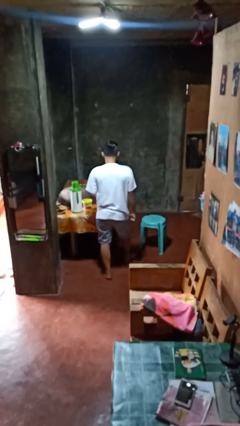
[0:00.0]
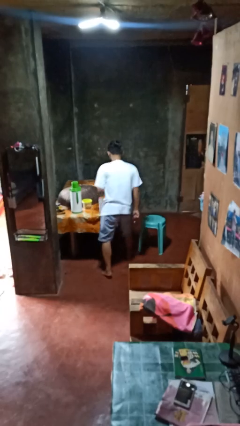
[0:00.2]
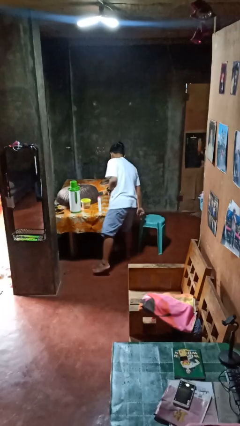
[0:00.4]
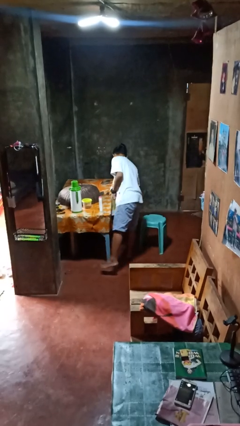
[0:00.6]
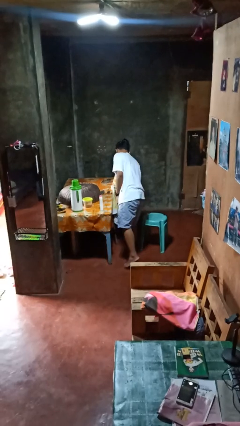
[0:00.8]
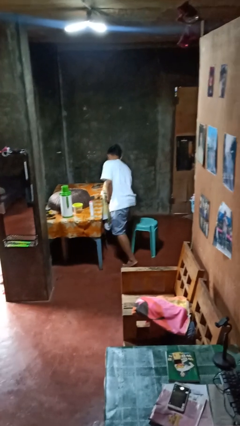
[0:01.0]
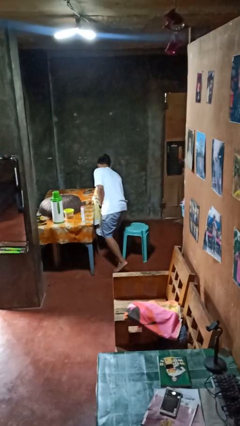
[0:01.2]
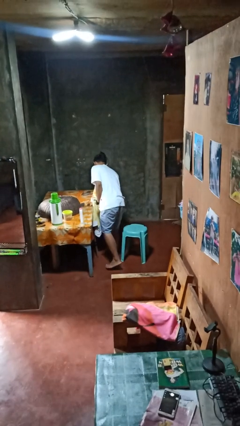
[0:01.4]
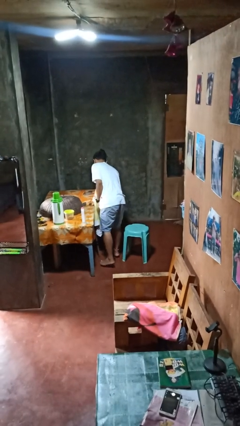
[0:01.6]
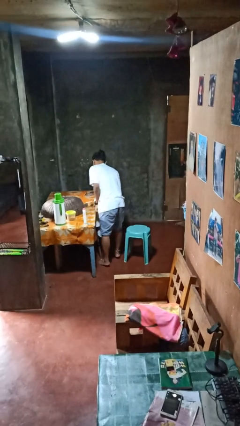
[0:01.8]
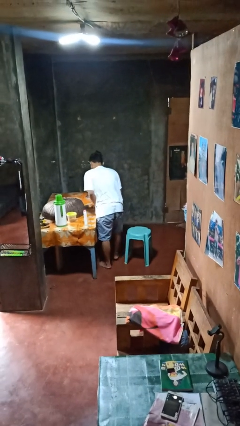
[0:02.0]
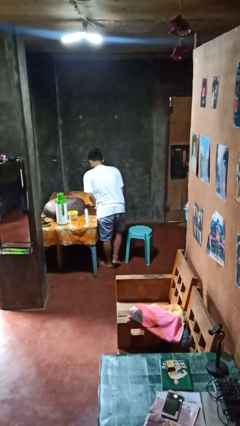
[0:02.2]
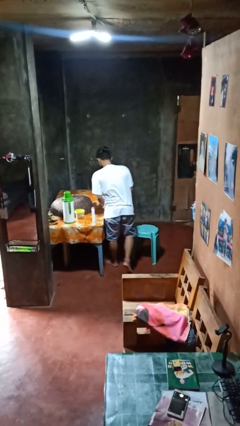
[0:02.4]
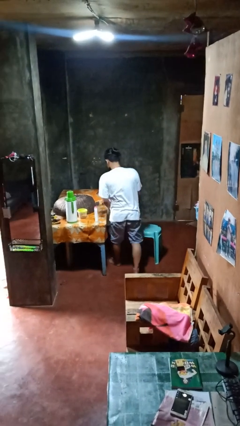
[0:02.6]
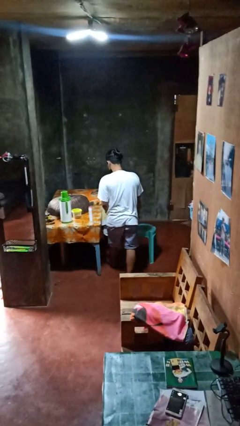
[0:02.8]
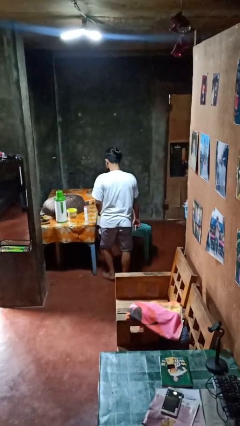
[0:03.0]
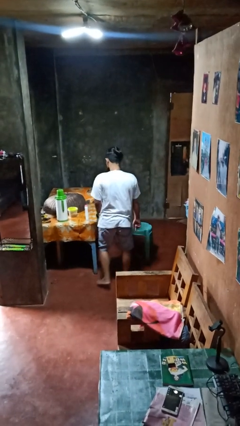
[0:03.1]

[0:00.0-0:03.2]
person bumps into table

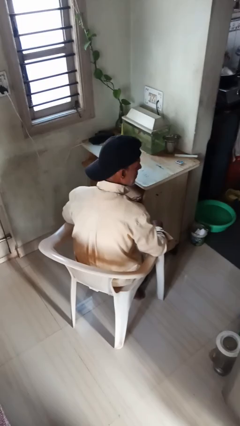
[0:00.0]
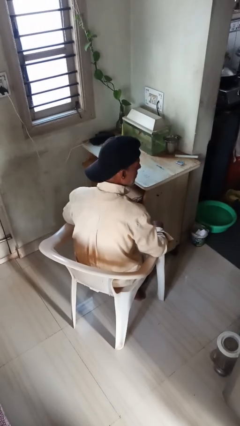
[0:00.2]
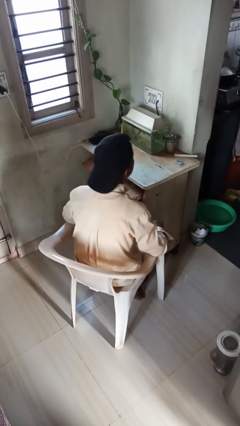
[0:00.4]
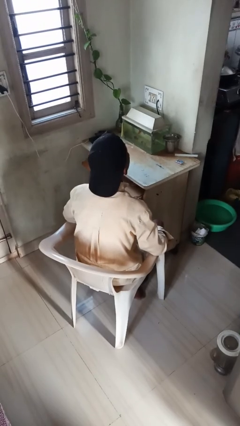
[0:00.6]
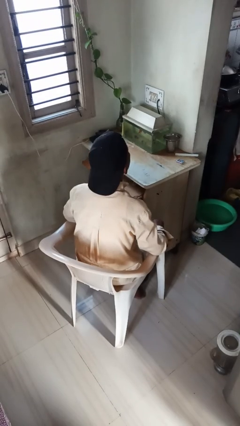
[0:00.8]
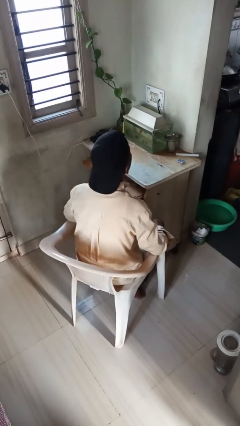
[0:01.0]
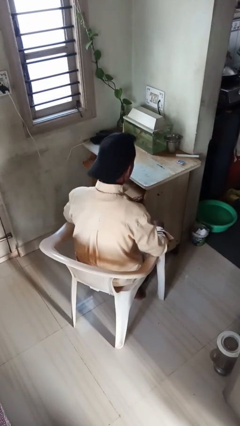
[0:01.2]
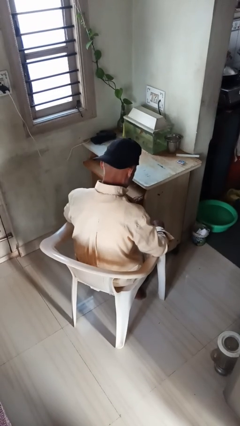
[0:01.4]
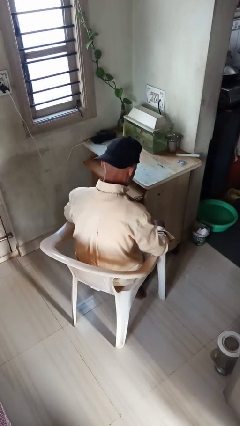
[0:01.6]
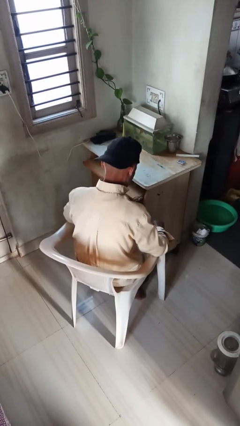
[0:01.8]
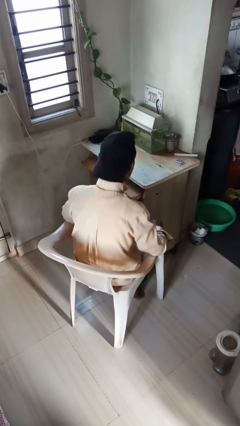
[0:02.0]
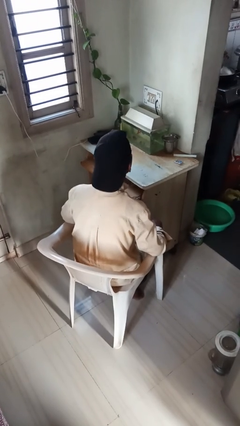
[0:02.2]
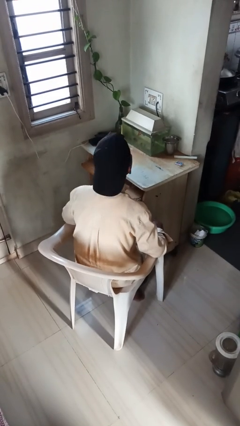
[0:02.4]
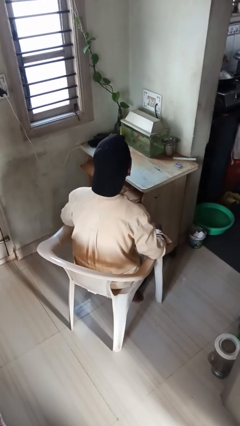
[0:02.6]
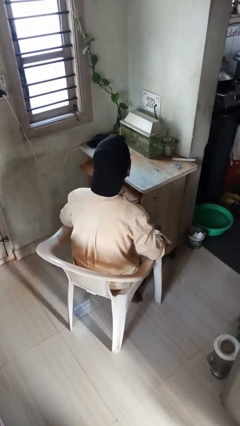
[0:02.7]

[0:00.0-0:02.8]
person nods head

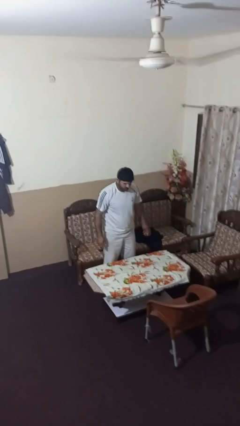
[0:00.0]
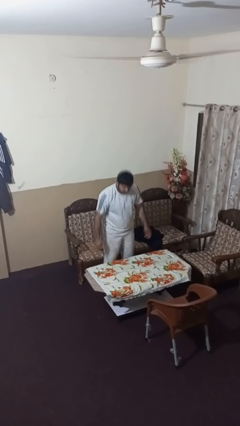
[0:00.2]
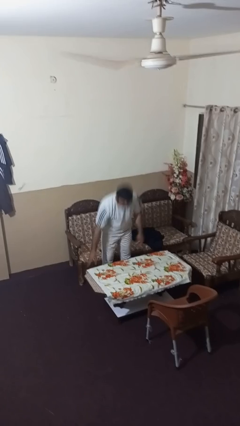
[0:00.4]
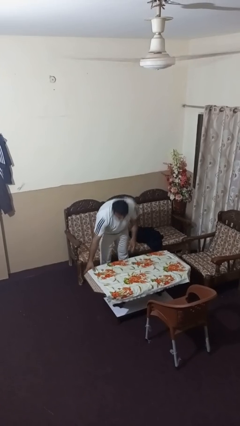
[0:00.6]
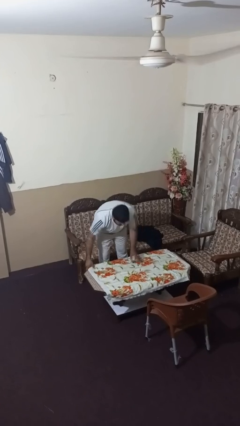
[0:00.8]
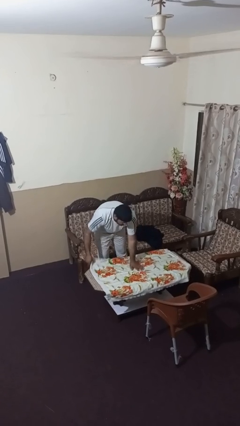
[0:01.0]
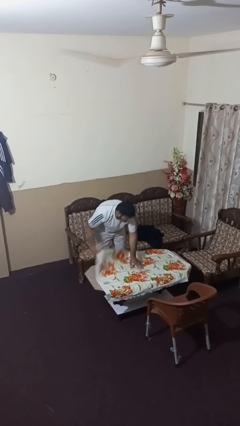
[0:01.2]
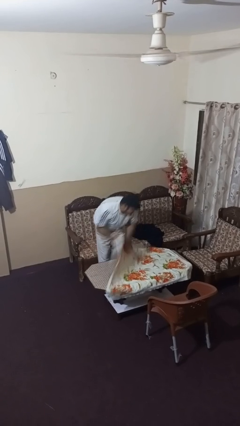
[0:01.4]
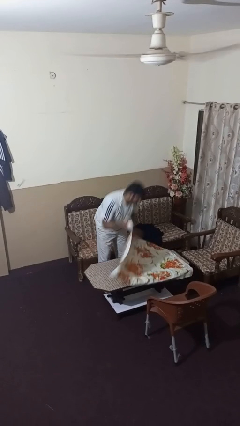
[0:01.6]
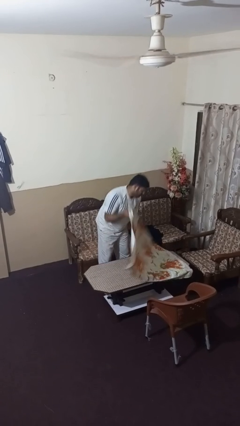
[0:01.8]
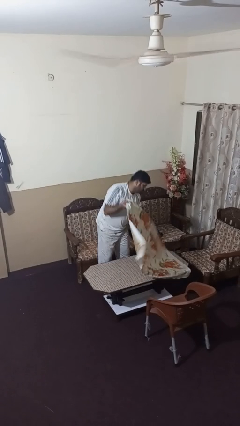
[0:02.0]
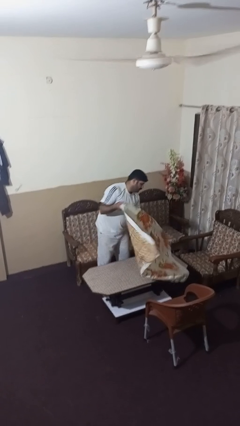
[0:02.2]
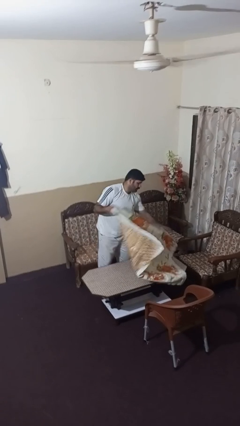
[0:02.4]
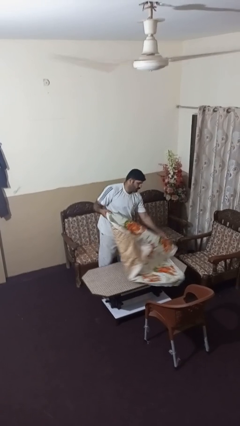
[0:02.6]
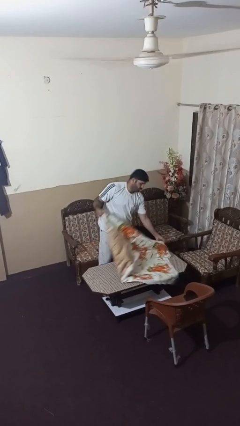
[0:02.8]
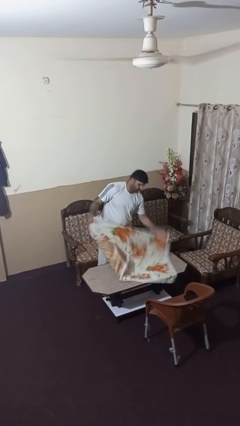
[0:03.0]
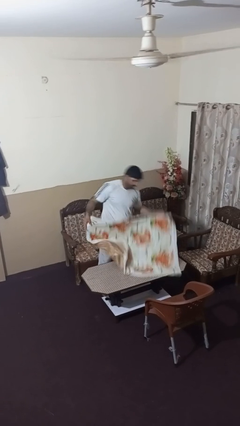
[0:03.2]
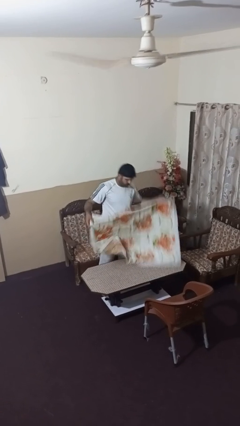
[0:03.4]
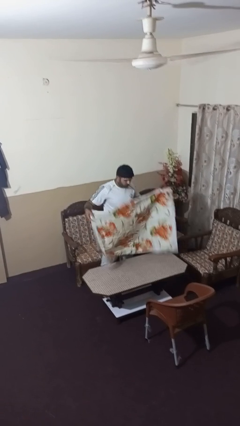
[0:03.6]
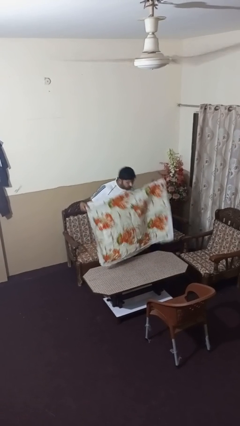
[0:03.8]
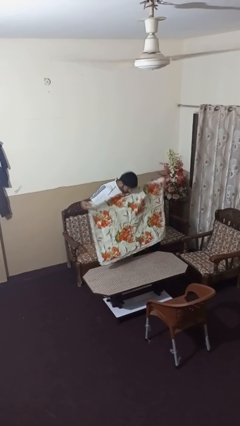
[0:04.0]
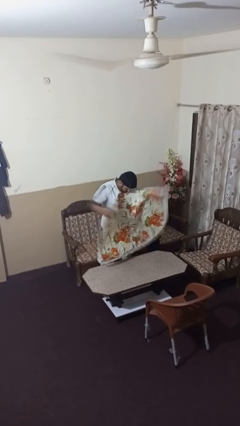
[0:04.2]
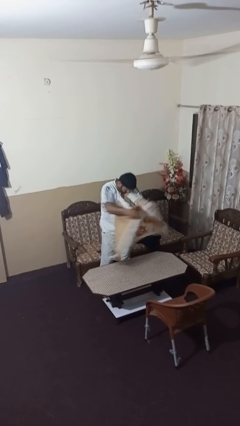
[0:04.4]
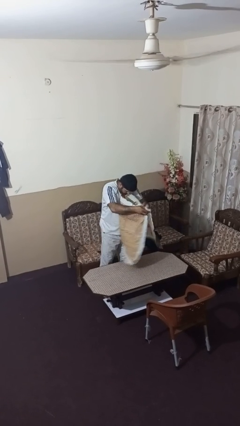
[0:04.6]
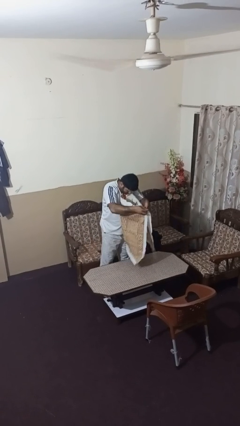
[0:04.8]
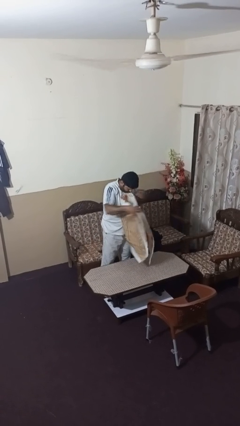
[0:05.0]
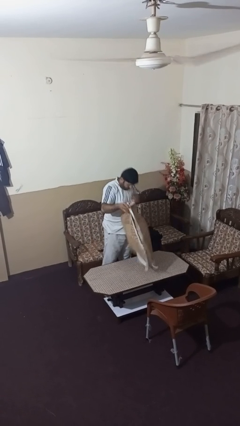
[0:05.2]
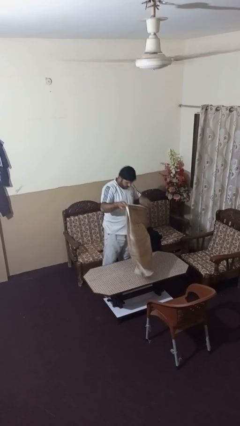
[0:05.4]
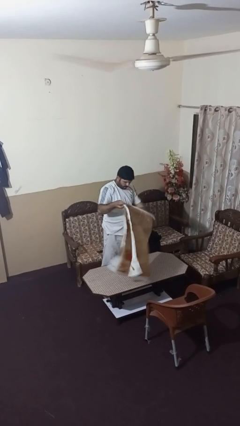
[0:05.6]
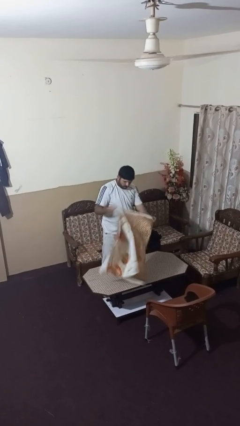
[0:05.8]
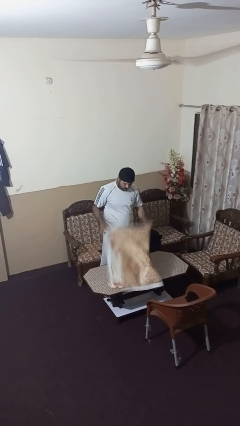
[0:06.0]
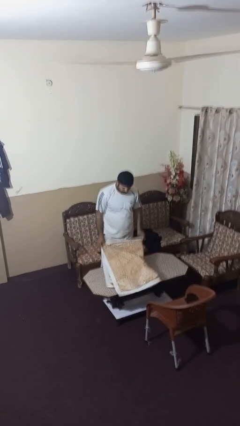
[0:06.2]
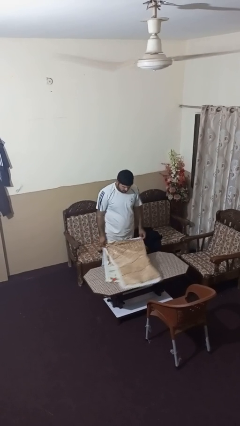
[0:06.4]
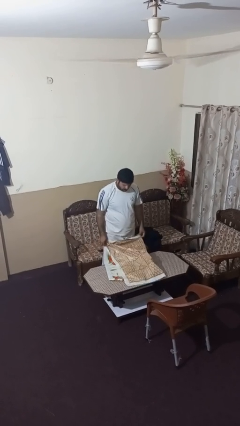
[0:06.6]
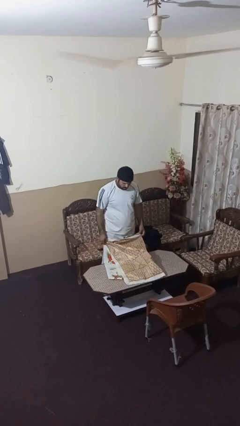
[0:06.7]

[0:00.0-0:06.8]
person folds tablecloth

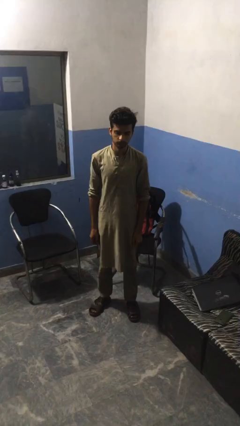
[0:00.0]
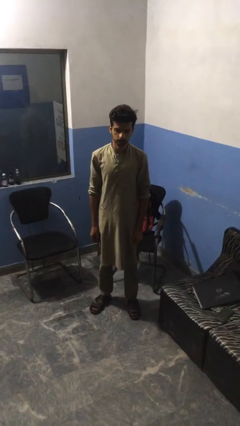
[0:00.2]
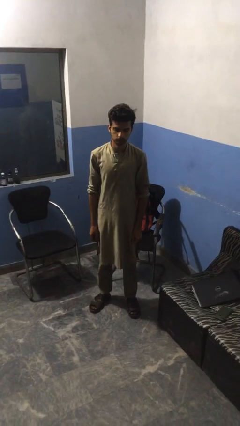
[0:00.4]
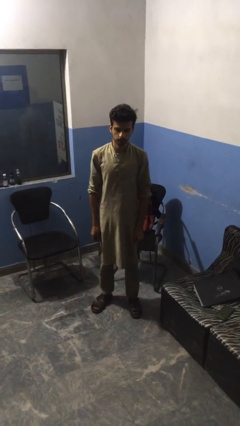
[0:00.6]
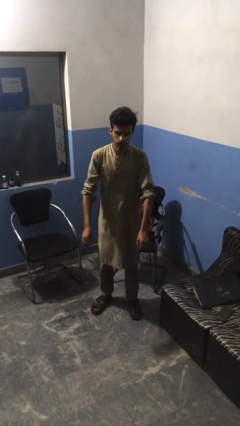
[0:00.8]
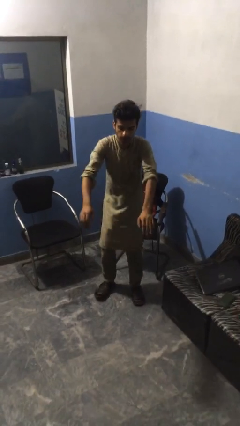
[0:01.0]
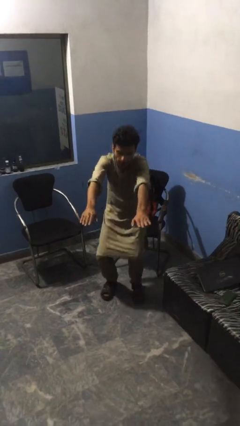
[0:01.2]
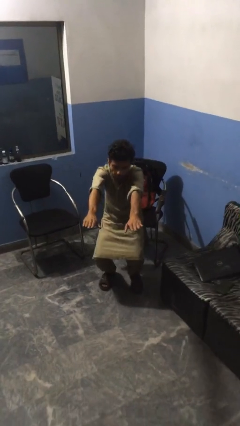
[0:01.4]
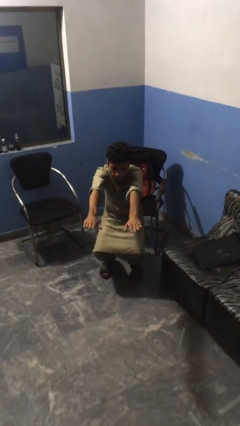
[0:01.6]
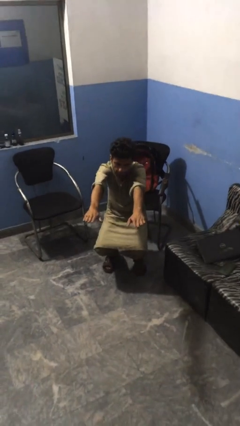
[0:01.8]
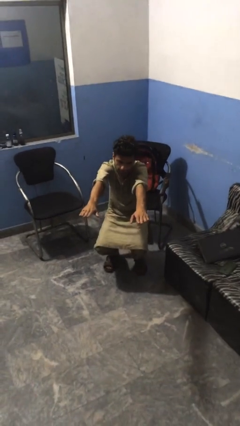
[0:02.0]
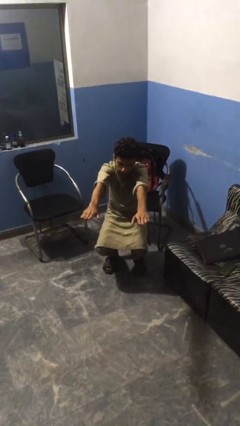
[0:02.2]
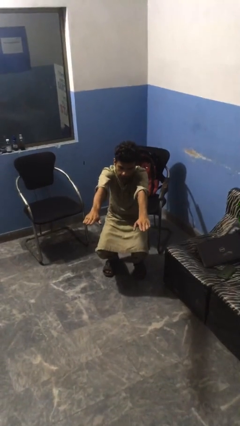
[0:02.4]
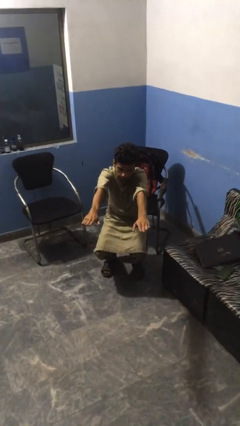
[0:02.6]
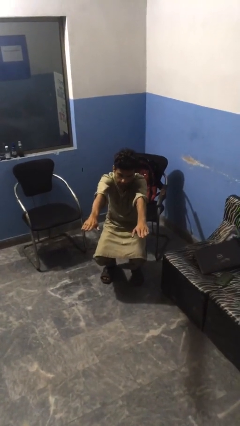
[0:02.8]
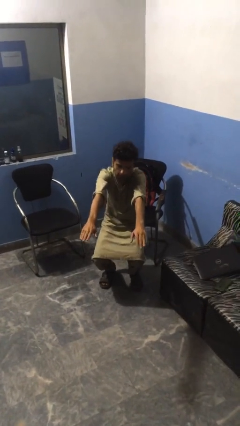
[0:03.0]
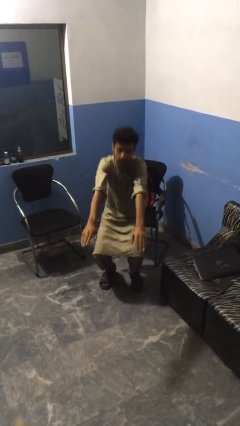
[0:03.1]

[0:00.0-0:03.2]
person squats

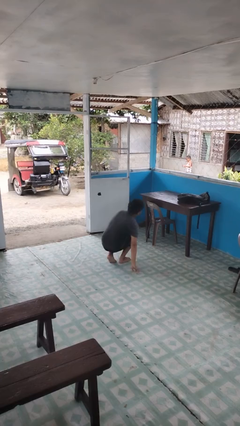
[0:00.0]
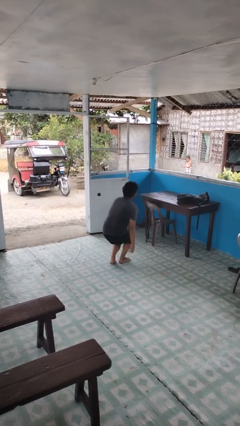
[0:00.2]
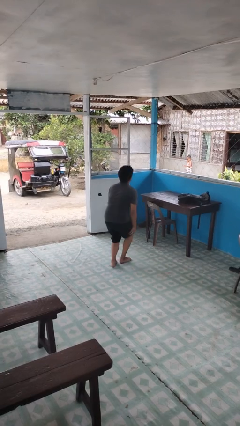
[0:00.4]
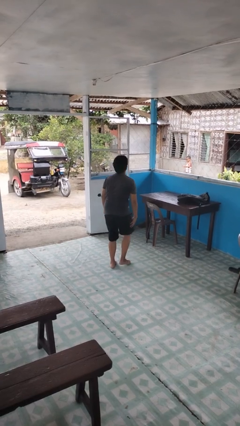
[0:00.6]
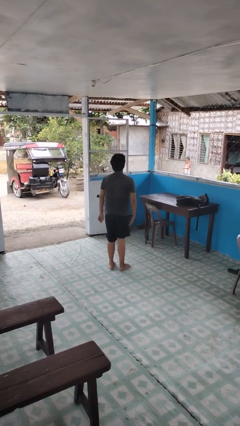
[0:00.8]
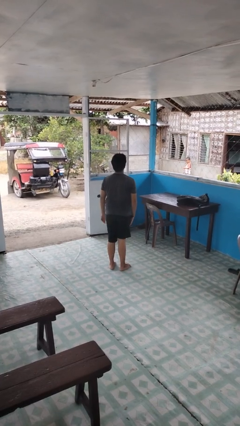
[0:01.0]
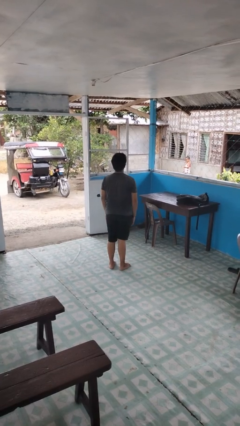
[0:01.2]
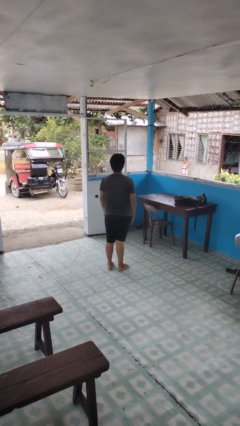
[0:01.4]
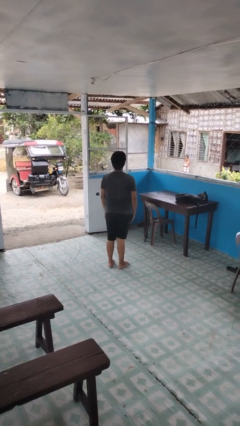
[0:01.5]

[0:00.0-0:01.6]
person stands up from floor
